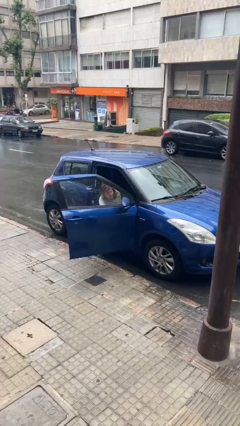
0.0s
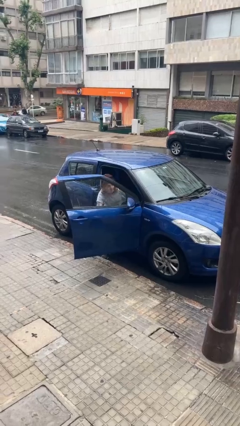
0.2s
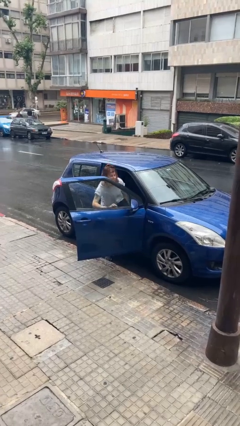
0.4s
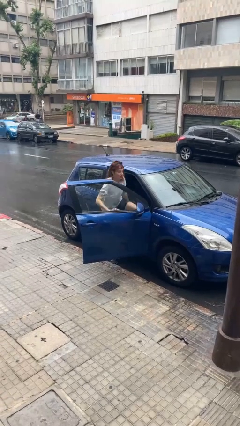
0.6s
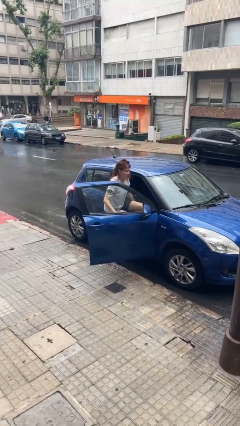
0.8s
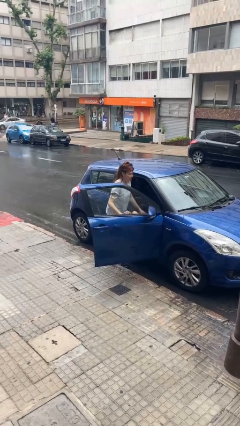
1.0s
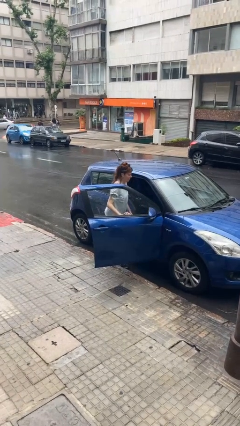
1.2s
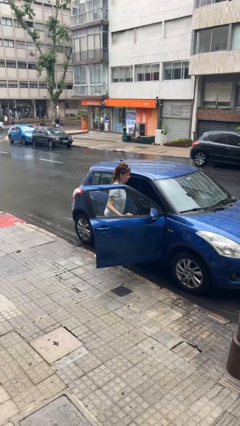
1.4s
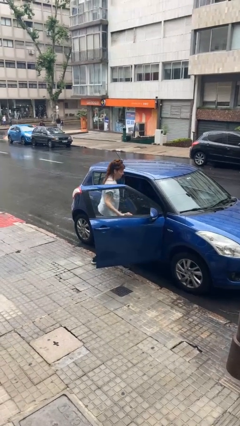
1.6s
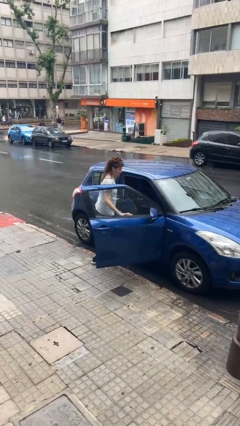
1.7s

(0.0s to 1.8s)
person exits car

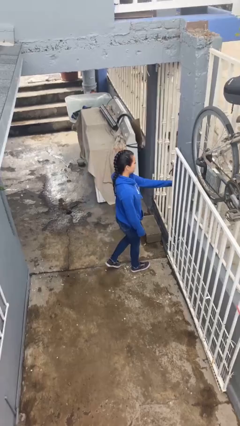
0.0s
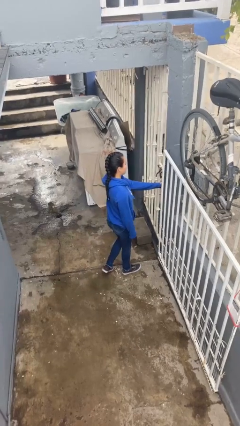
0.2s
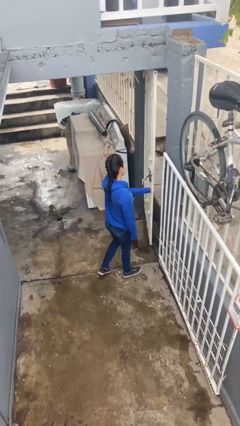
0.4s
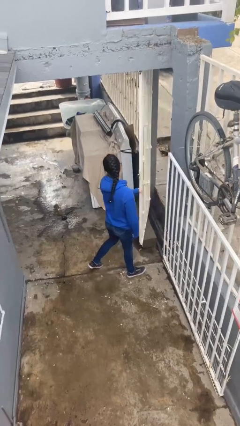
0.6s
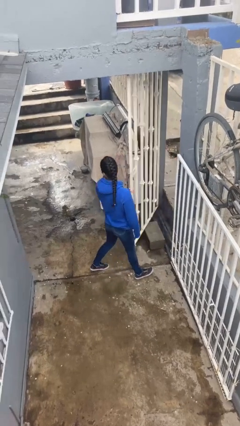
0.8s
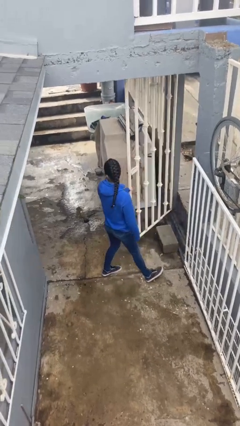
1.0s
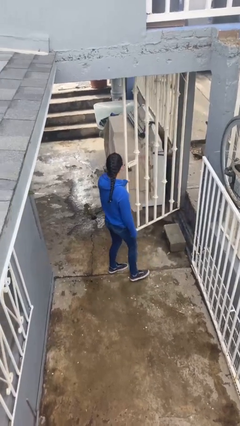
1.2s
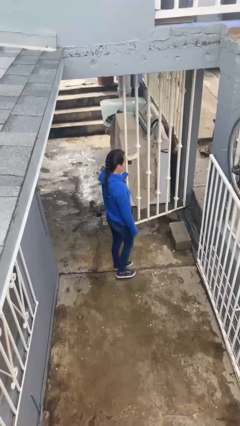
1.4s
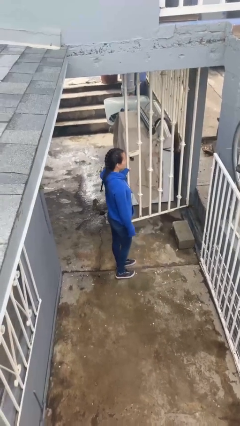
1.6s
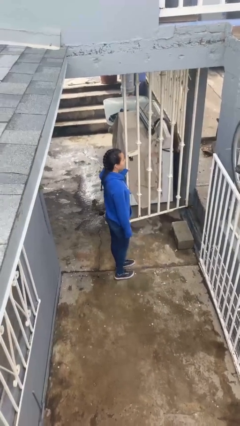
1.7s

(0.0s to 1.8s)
person opens facility door

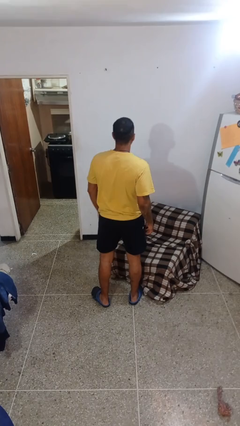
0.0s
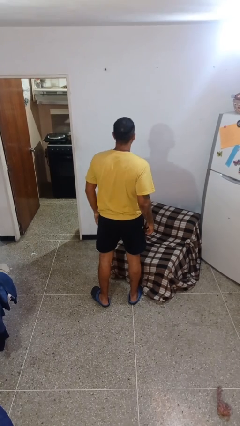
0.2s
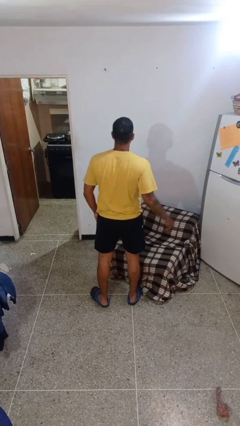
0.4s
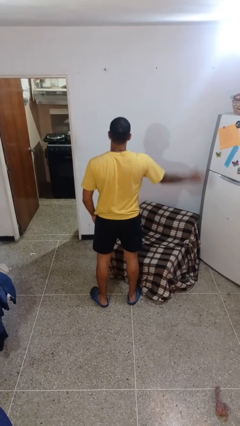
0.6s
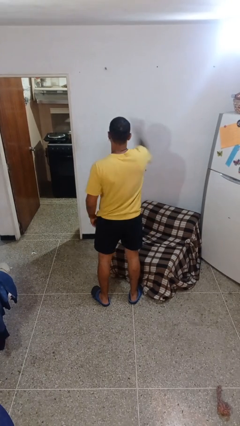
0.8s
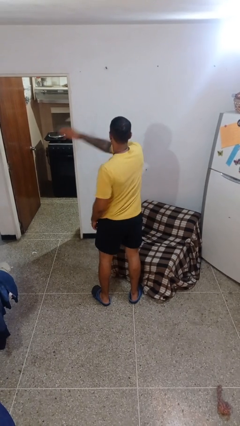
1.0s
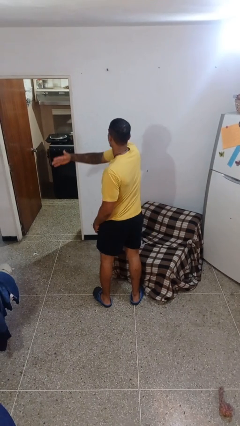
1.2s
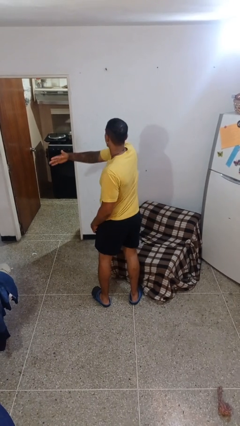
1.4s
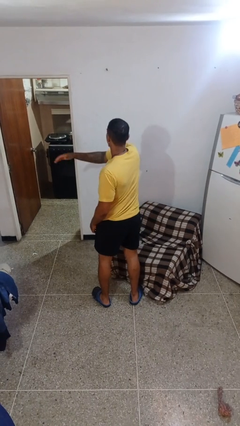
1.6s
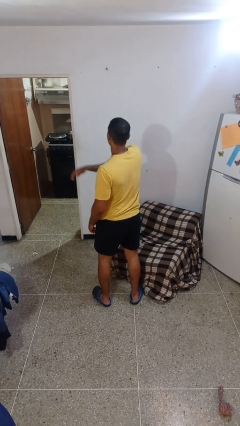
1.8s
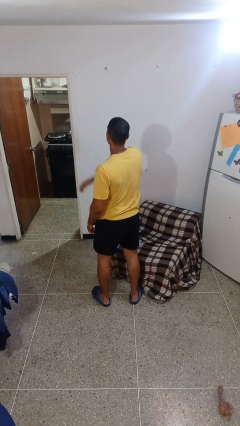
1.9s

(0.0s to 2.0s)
person gestures swipe left

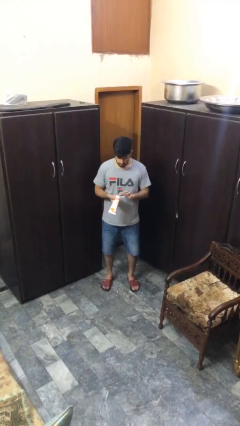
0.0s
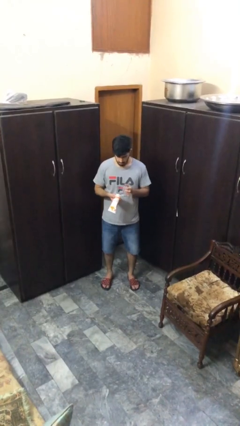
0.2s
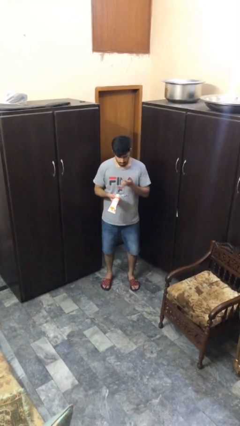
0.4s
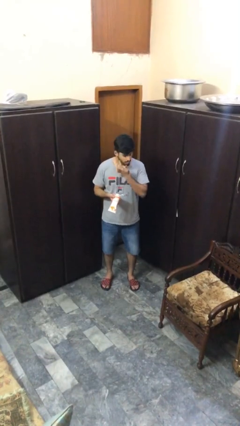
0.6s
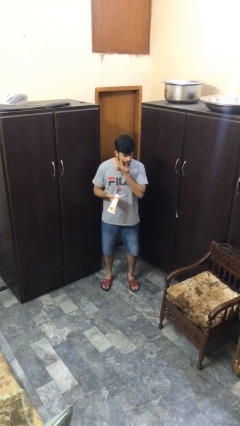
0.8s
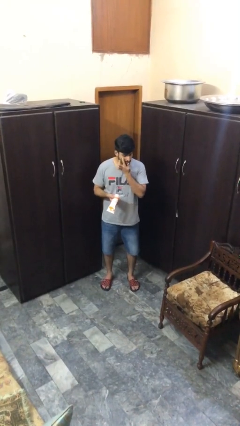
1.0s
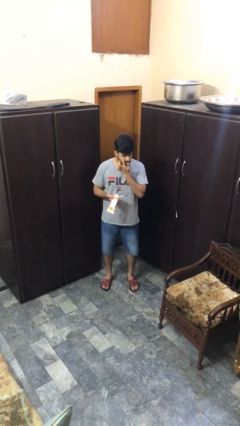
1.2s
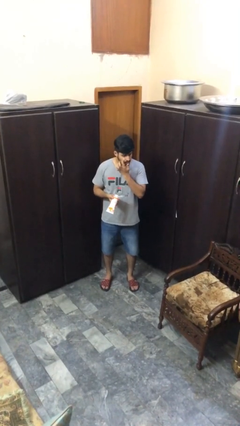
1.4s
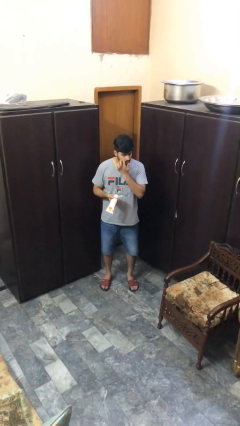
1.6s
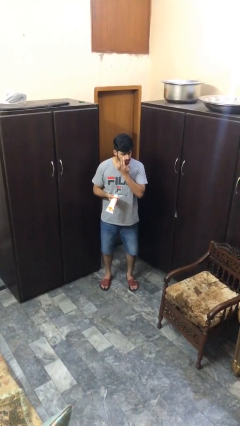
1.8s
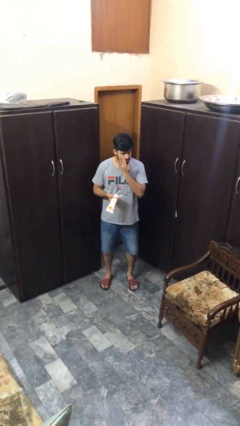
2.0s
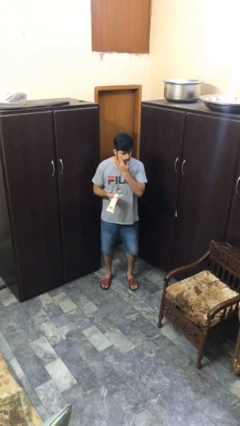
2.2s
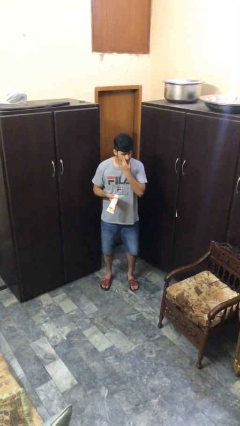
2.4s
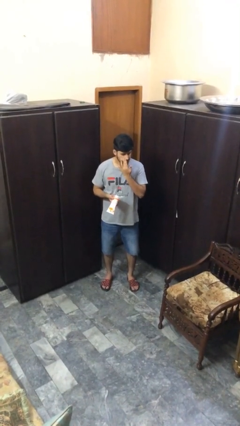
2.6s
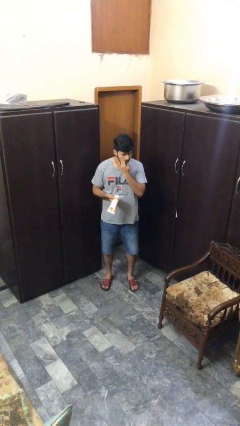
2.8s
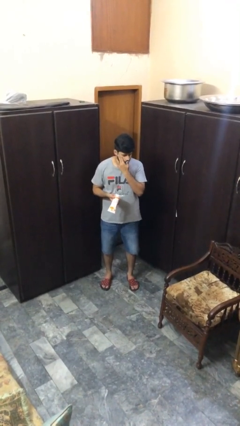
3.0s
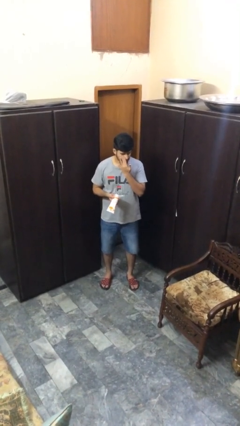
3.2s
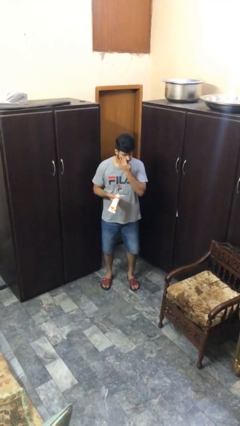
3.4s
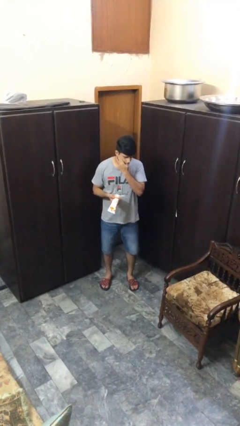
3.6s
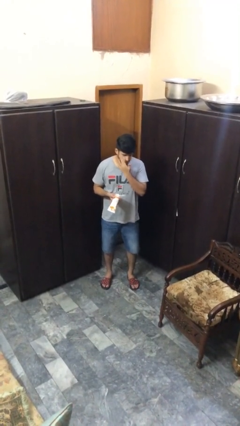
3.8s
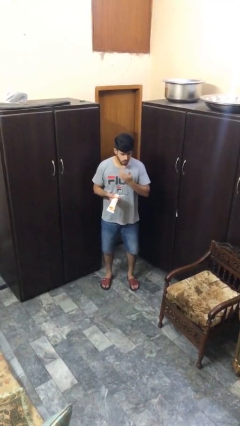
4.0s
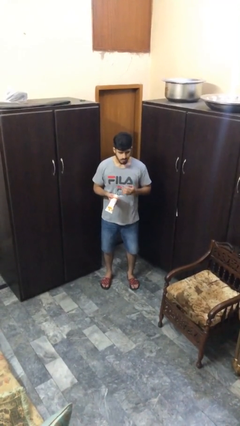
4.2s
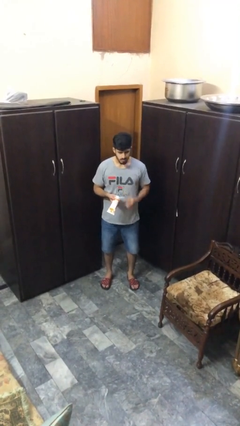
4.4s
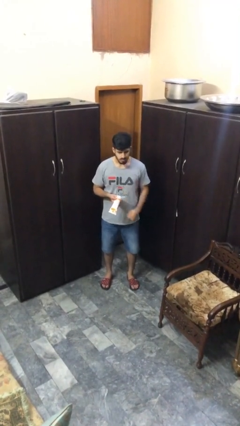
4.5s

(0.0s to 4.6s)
person applies sunscreen

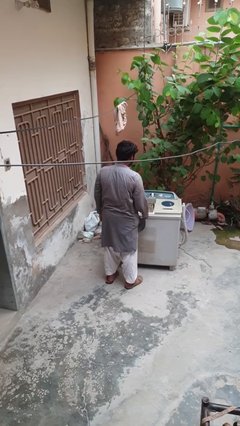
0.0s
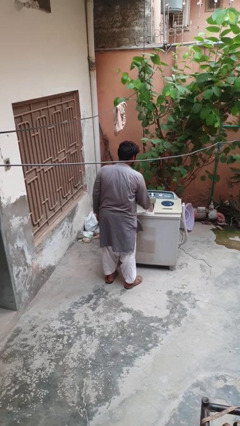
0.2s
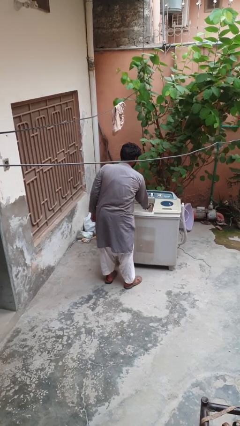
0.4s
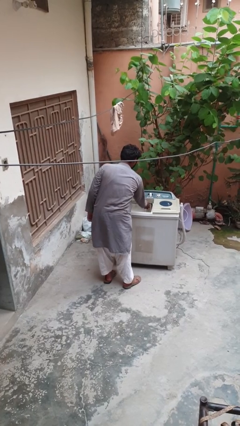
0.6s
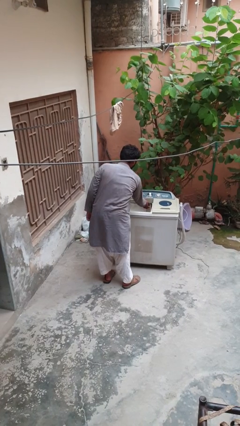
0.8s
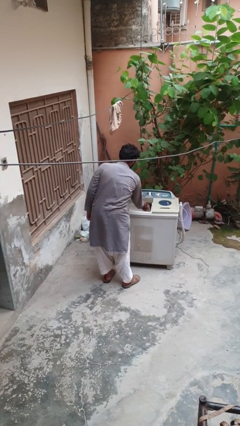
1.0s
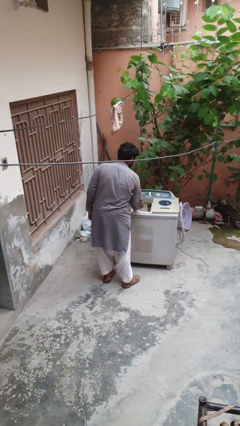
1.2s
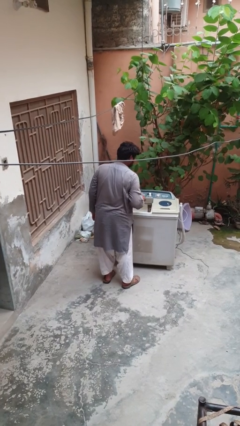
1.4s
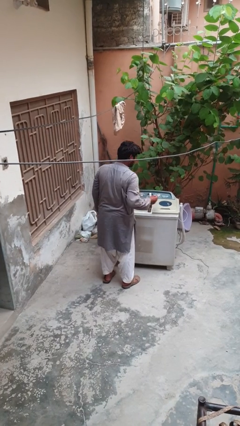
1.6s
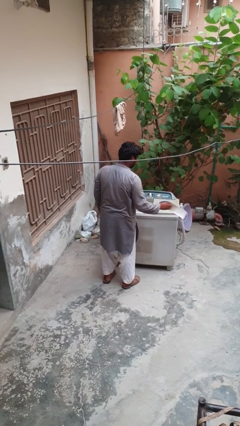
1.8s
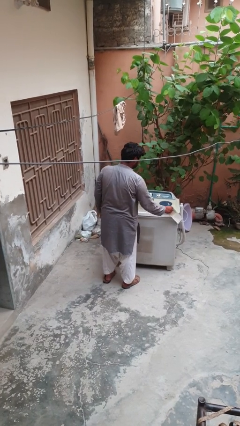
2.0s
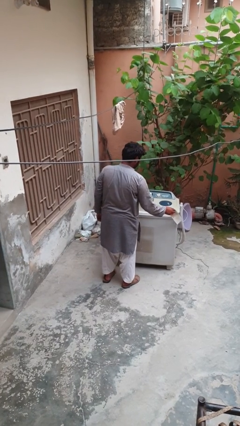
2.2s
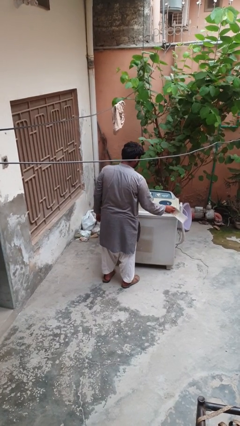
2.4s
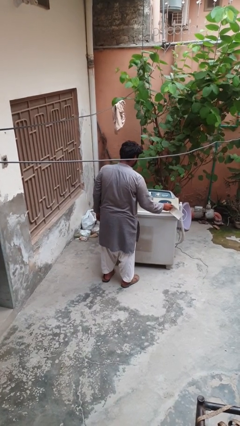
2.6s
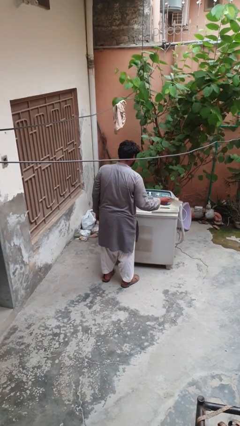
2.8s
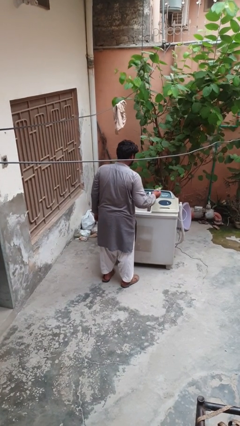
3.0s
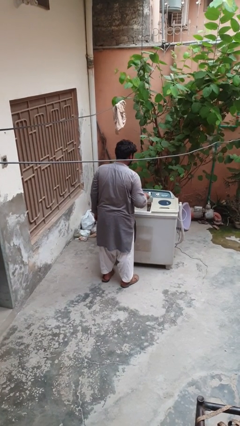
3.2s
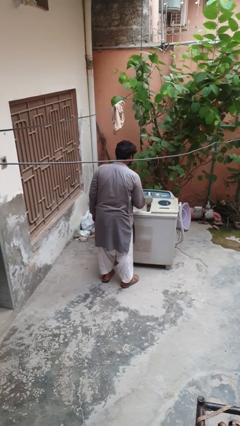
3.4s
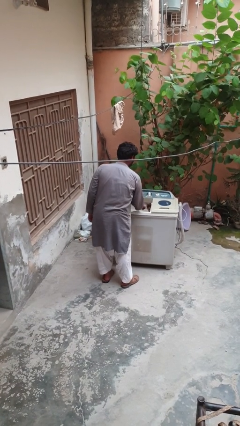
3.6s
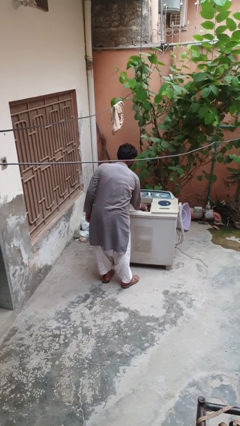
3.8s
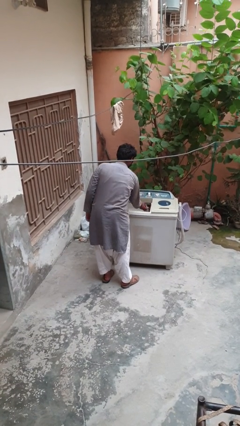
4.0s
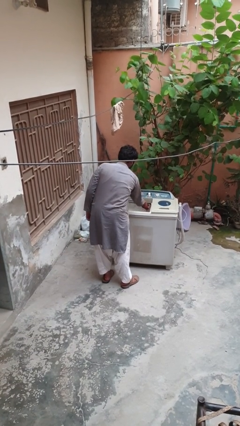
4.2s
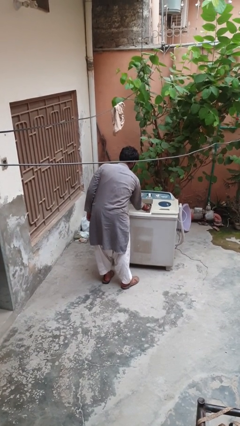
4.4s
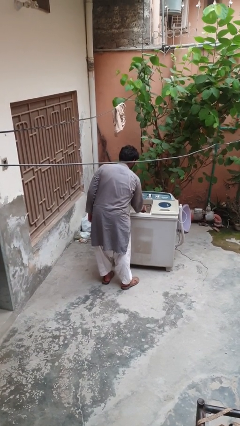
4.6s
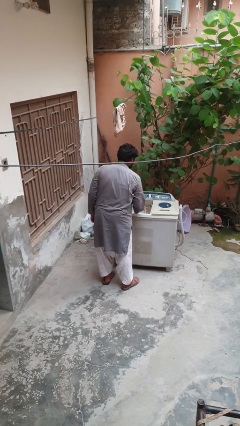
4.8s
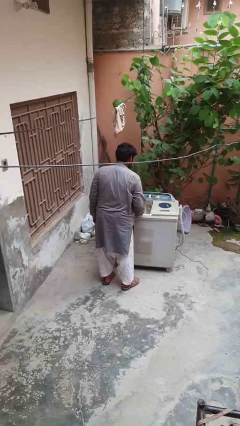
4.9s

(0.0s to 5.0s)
person cleans dryer lint trap

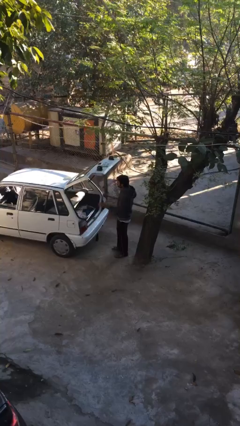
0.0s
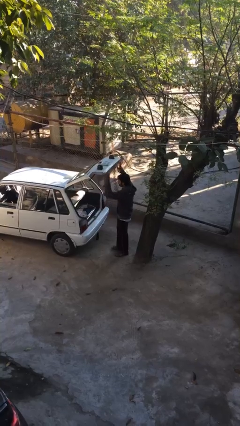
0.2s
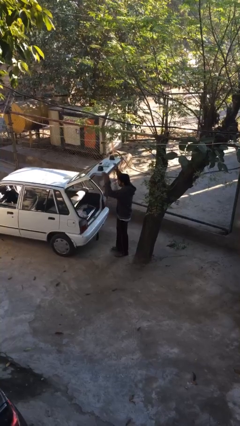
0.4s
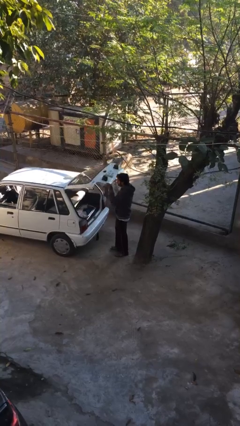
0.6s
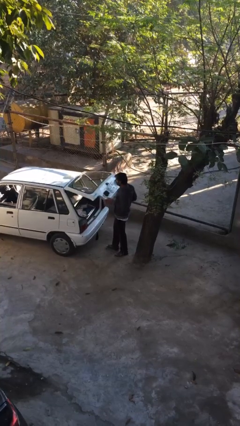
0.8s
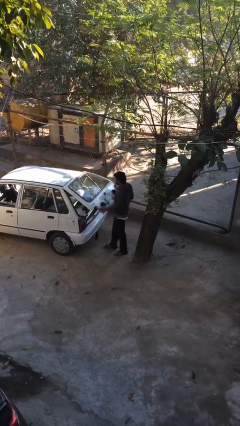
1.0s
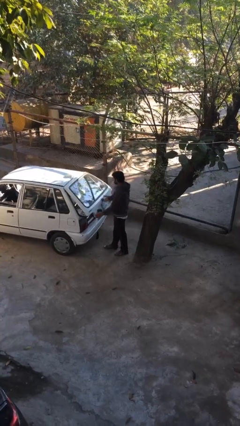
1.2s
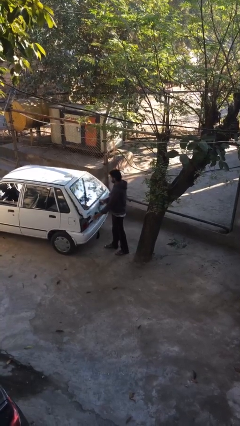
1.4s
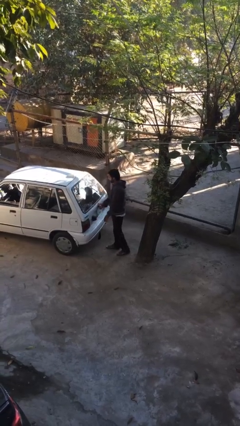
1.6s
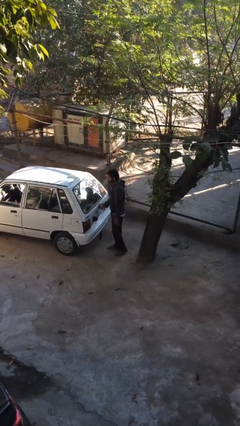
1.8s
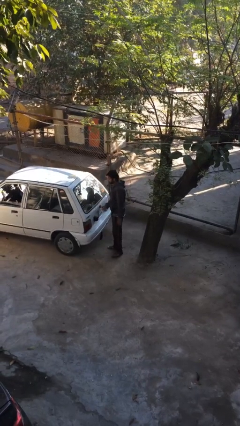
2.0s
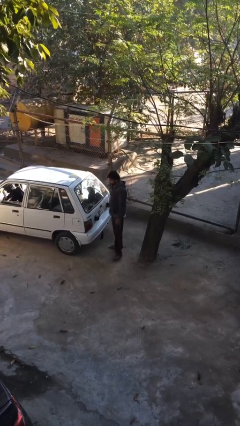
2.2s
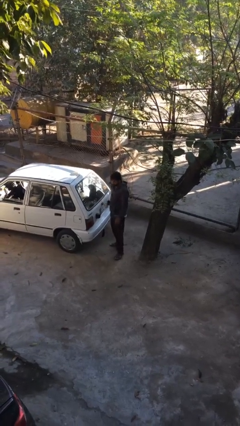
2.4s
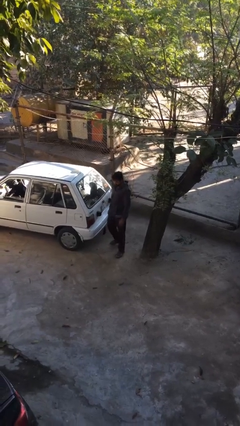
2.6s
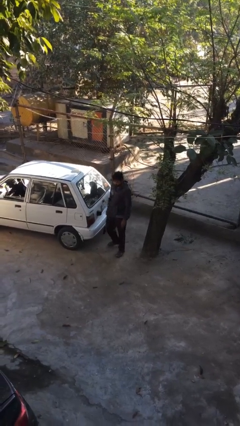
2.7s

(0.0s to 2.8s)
person closes car trunk
